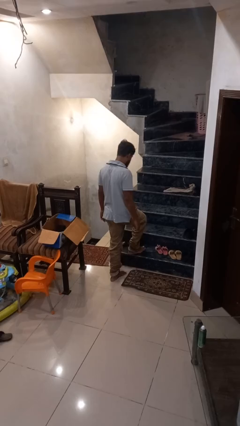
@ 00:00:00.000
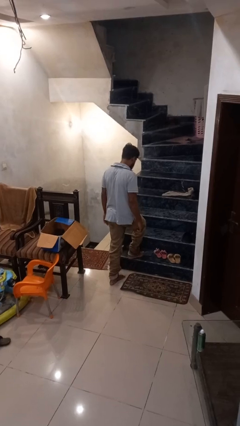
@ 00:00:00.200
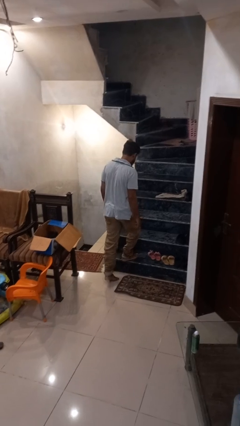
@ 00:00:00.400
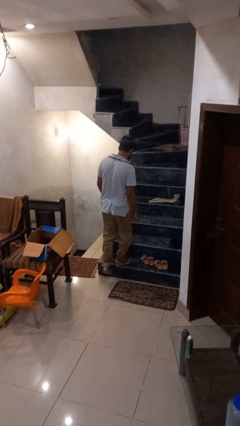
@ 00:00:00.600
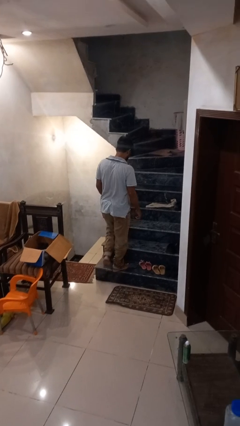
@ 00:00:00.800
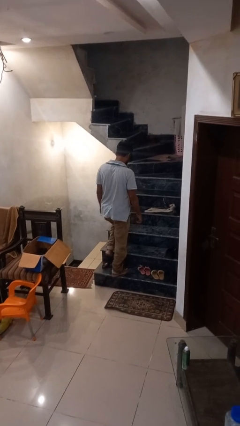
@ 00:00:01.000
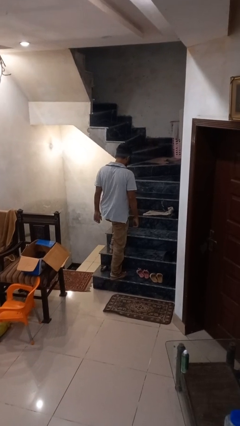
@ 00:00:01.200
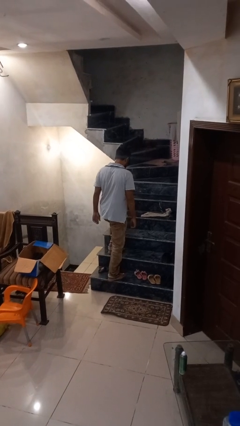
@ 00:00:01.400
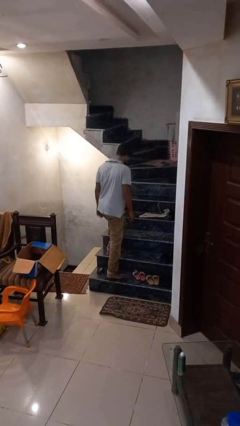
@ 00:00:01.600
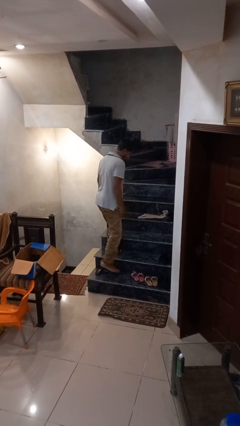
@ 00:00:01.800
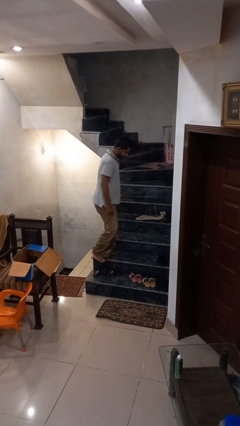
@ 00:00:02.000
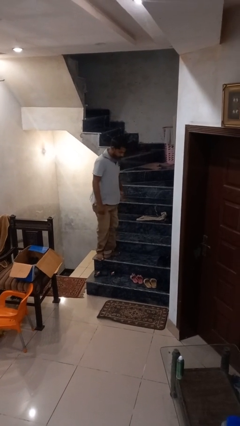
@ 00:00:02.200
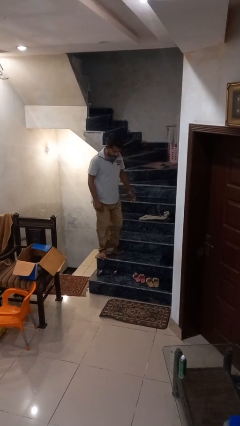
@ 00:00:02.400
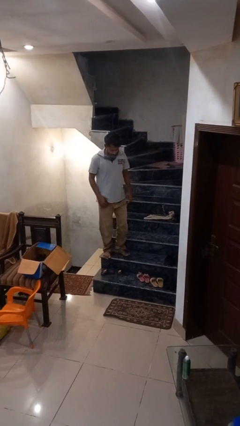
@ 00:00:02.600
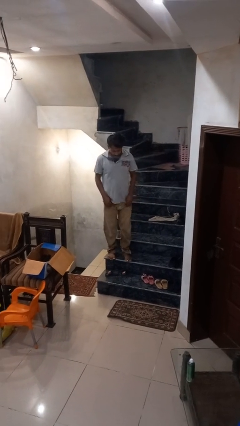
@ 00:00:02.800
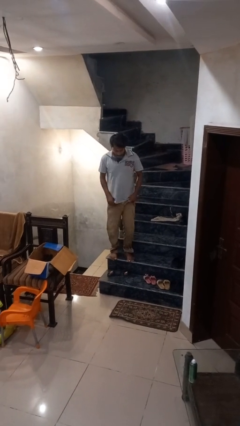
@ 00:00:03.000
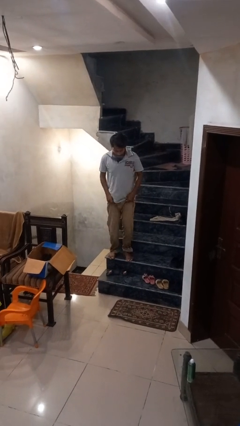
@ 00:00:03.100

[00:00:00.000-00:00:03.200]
person climbs up stairs

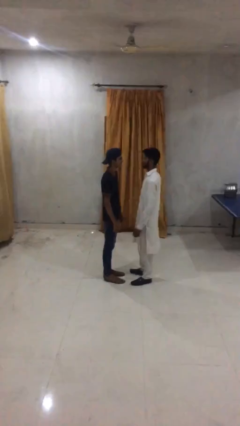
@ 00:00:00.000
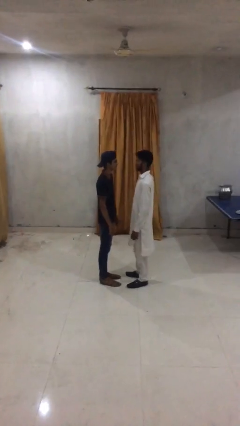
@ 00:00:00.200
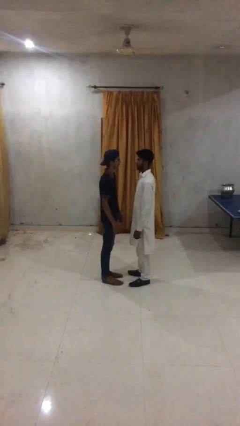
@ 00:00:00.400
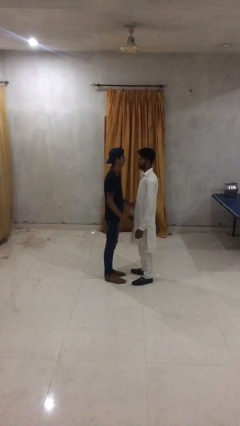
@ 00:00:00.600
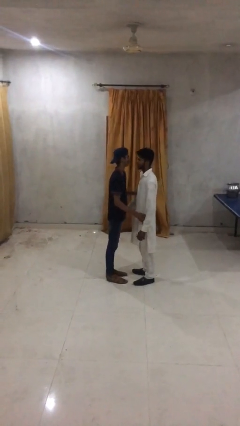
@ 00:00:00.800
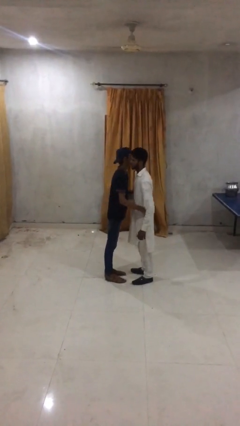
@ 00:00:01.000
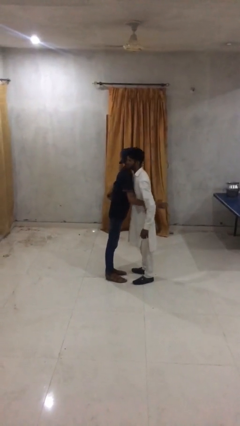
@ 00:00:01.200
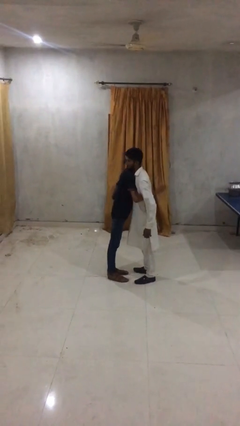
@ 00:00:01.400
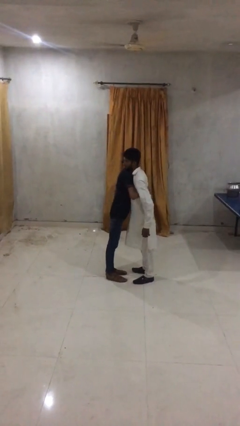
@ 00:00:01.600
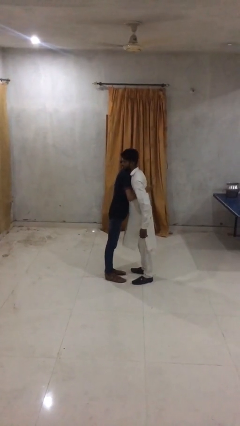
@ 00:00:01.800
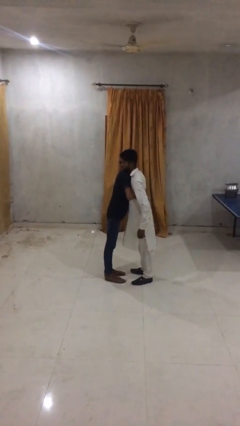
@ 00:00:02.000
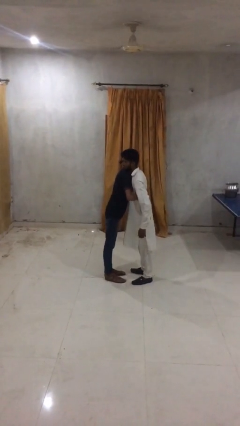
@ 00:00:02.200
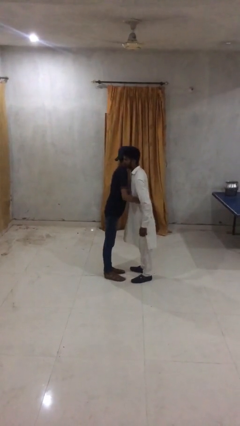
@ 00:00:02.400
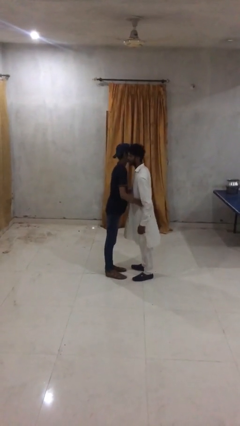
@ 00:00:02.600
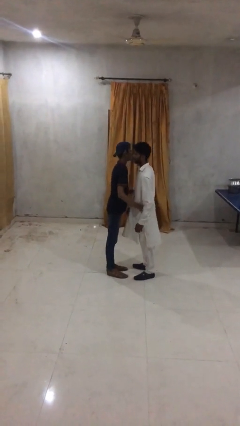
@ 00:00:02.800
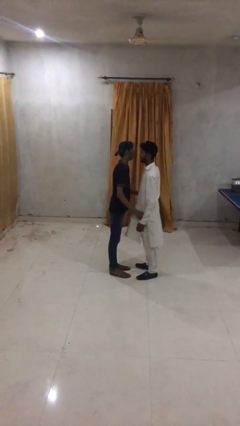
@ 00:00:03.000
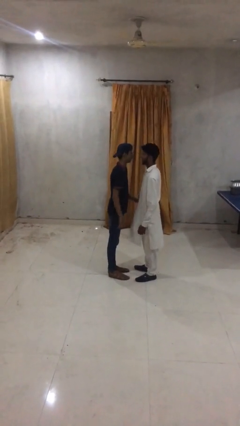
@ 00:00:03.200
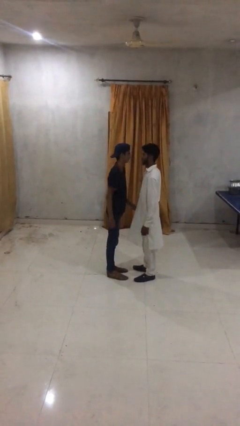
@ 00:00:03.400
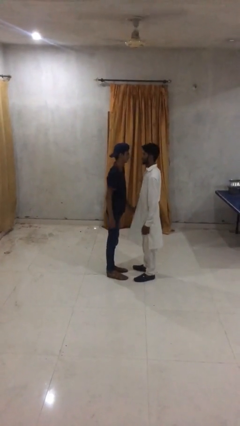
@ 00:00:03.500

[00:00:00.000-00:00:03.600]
person embraces person

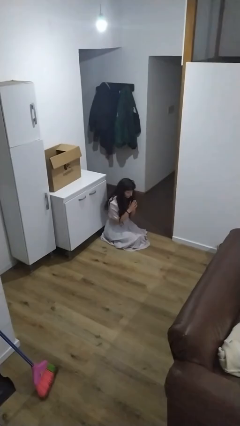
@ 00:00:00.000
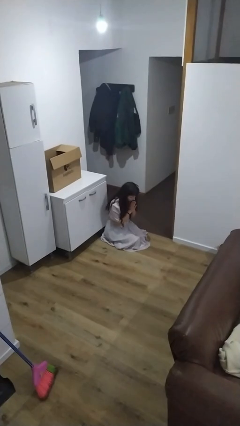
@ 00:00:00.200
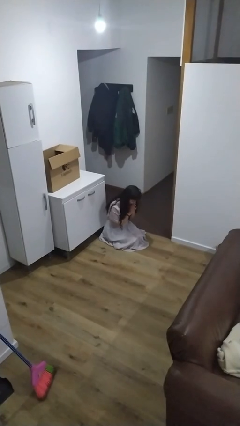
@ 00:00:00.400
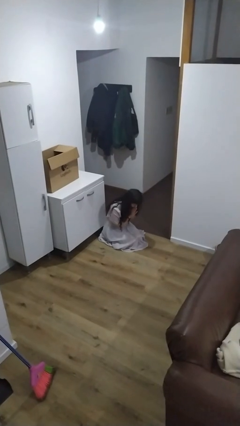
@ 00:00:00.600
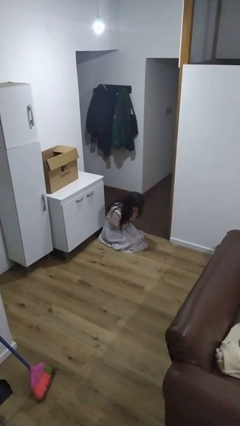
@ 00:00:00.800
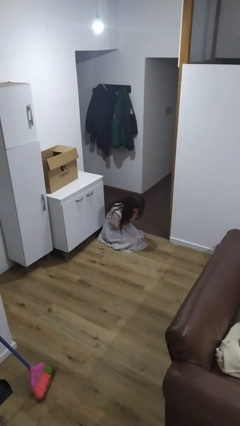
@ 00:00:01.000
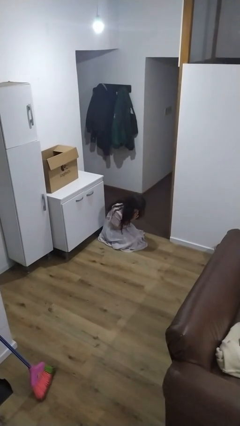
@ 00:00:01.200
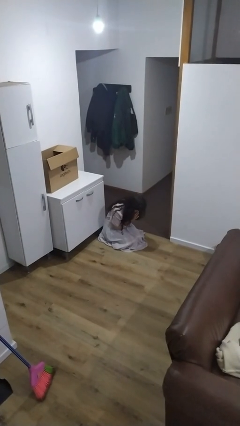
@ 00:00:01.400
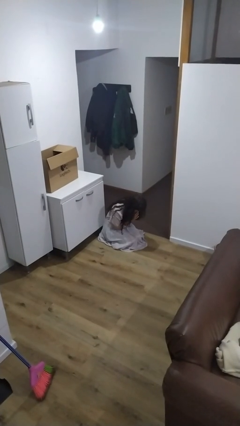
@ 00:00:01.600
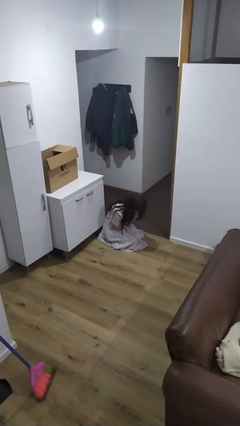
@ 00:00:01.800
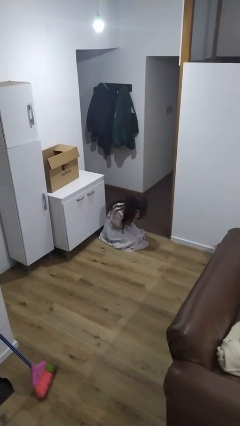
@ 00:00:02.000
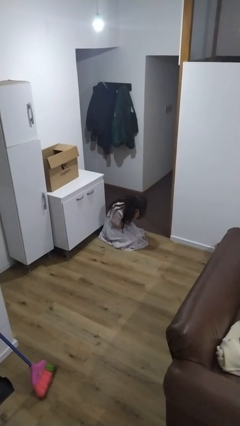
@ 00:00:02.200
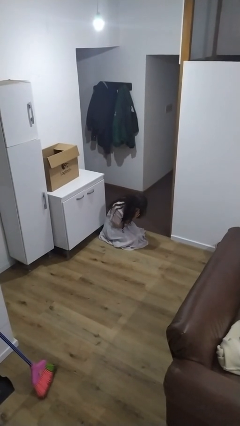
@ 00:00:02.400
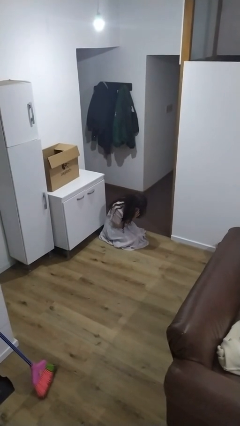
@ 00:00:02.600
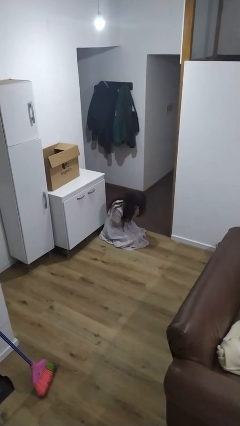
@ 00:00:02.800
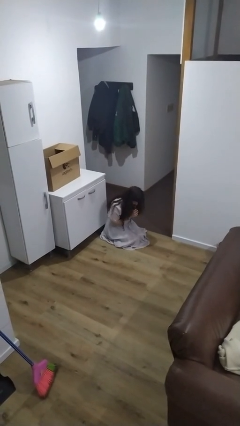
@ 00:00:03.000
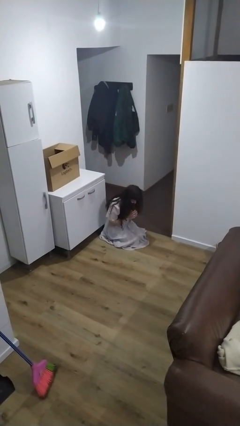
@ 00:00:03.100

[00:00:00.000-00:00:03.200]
person prays

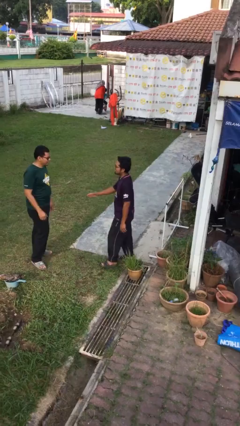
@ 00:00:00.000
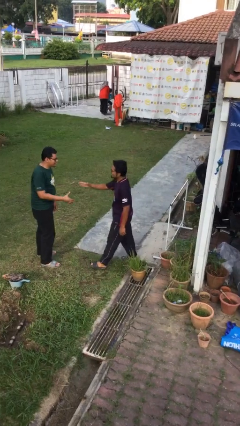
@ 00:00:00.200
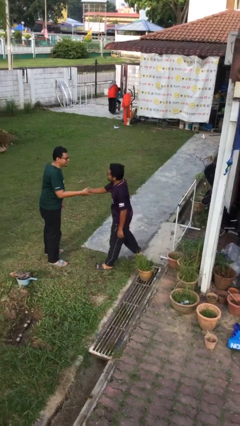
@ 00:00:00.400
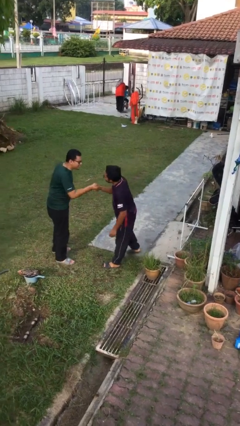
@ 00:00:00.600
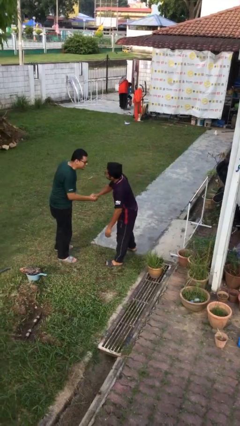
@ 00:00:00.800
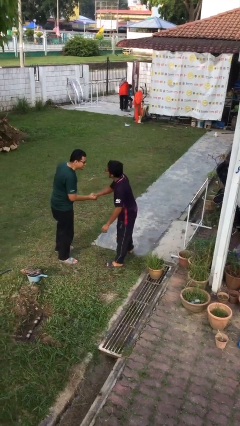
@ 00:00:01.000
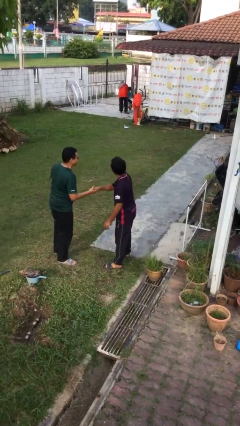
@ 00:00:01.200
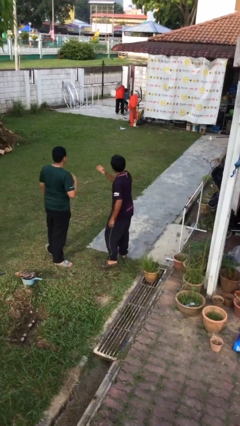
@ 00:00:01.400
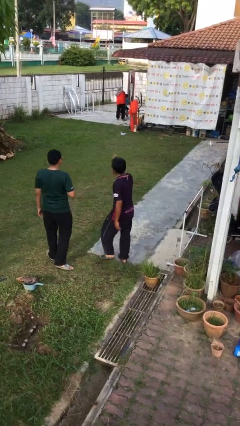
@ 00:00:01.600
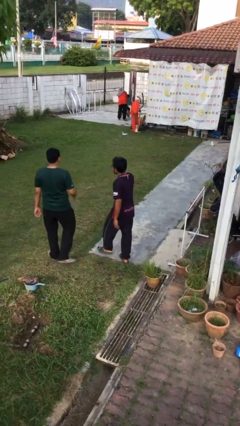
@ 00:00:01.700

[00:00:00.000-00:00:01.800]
person shakes hand

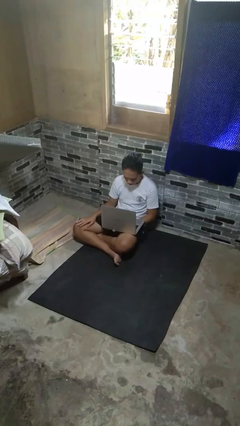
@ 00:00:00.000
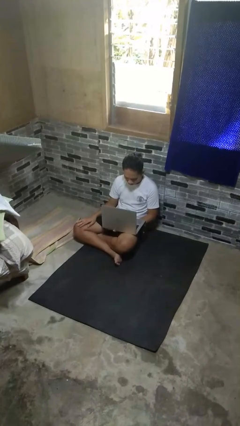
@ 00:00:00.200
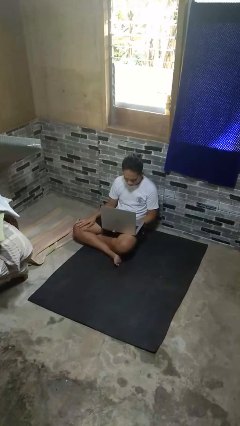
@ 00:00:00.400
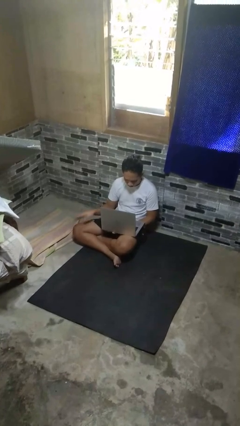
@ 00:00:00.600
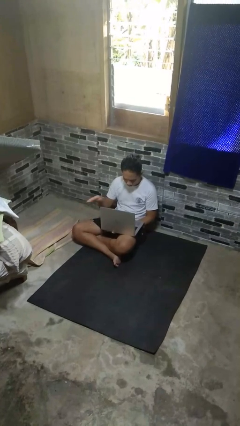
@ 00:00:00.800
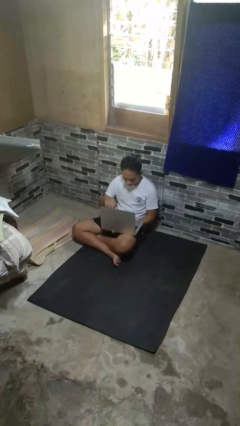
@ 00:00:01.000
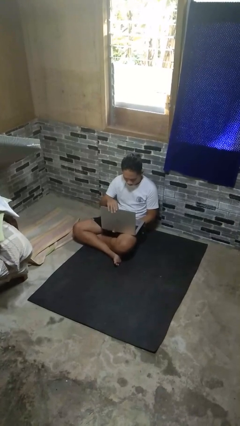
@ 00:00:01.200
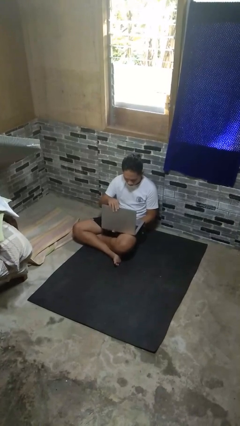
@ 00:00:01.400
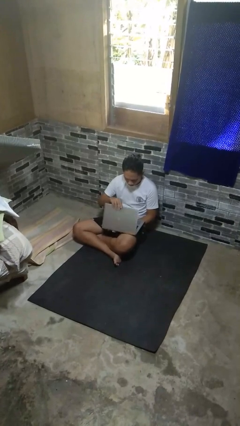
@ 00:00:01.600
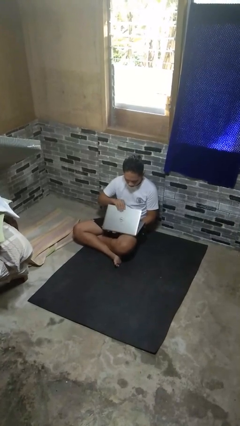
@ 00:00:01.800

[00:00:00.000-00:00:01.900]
person closes laptop

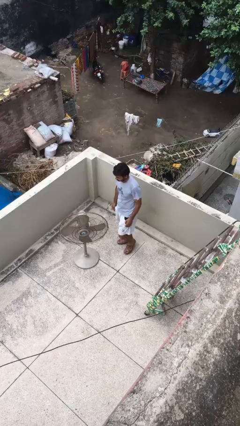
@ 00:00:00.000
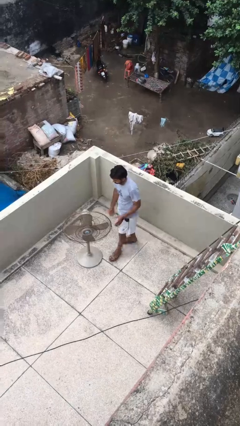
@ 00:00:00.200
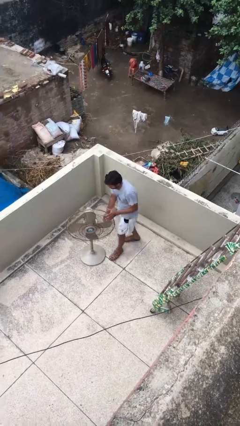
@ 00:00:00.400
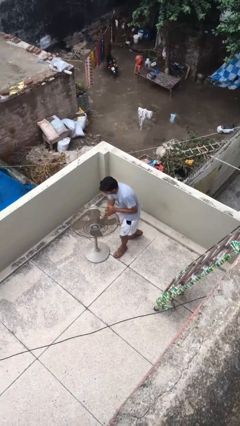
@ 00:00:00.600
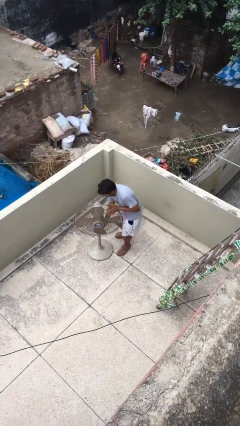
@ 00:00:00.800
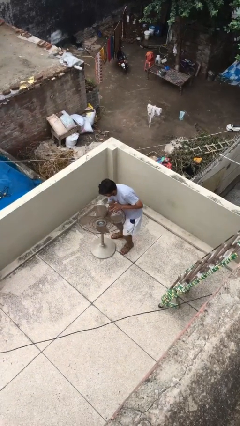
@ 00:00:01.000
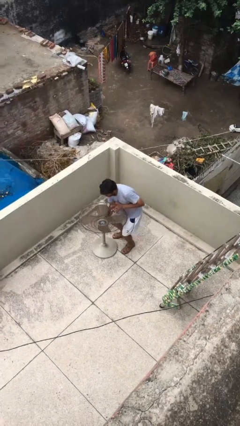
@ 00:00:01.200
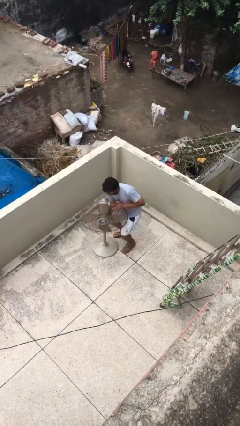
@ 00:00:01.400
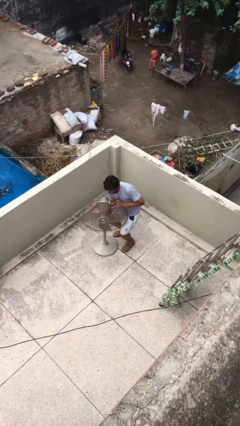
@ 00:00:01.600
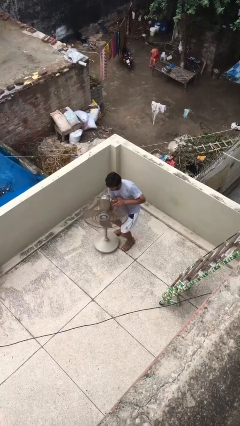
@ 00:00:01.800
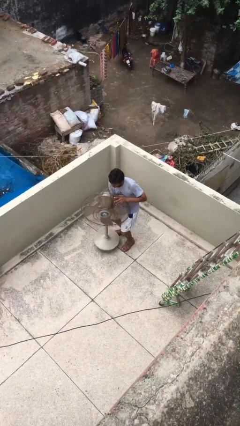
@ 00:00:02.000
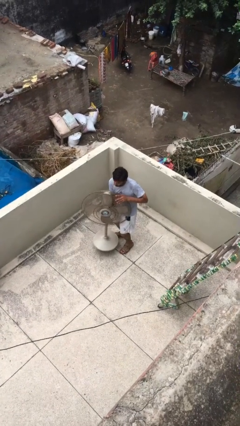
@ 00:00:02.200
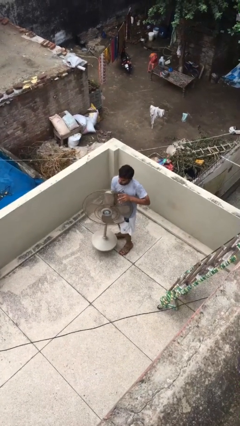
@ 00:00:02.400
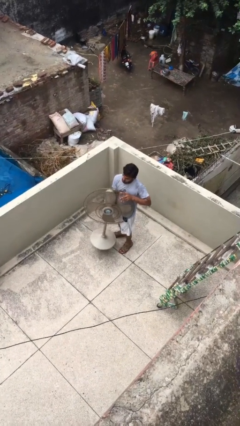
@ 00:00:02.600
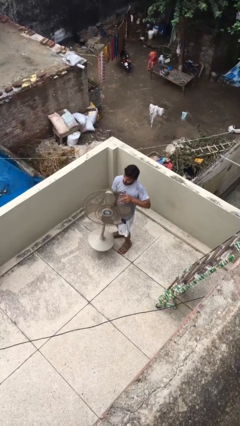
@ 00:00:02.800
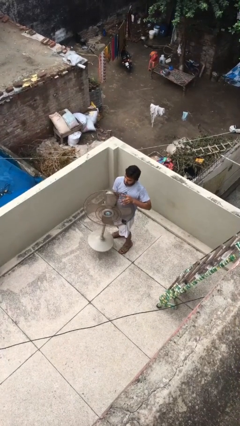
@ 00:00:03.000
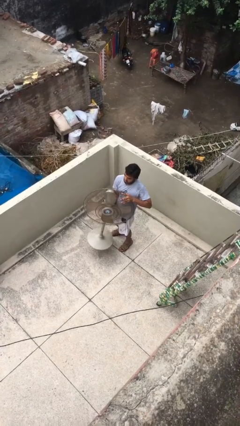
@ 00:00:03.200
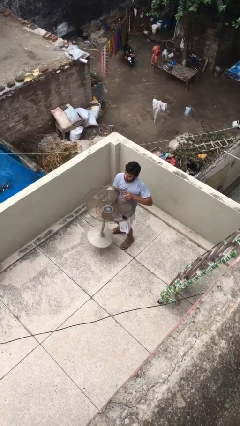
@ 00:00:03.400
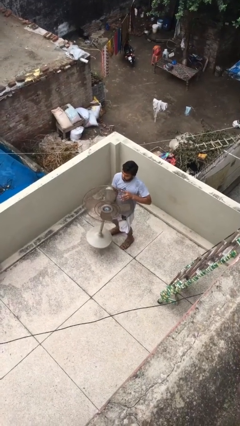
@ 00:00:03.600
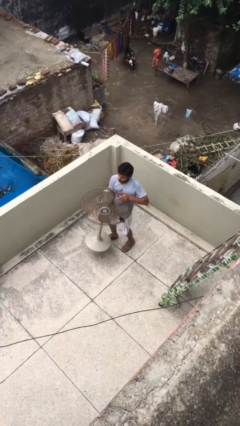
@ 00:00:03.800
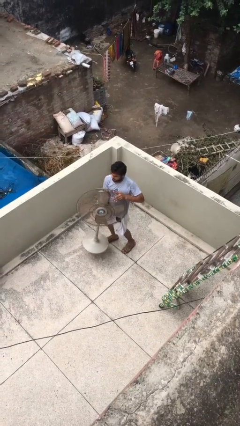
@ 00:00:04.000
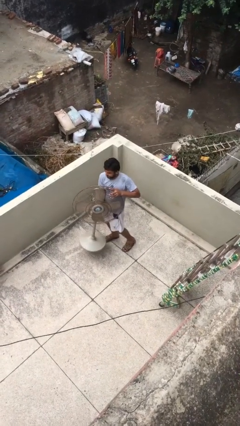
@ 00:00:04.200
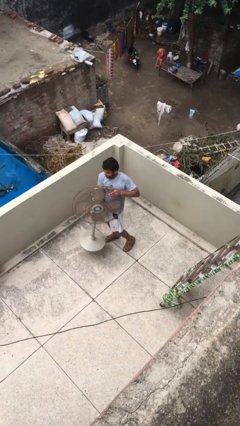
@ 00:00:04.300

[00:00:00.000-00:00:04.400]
person picks up object from floor
